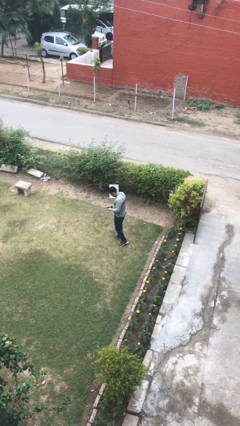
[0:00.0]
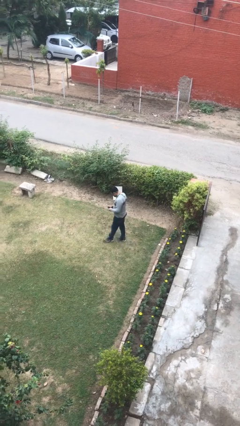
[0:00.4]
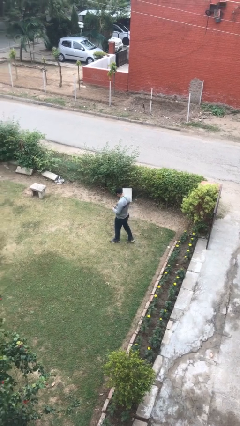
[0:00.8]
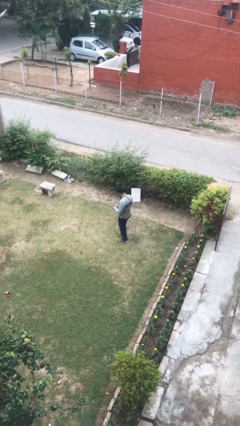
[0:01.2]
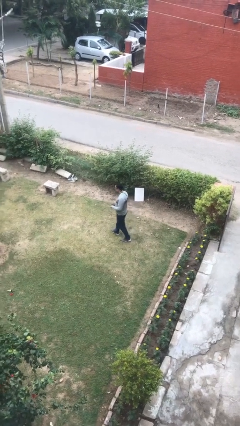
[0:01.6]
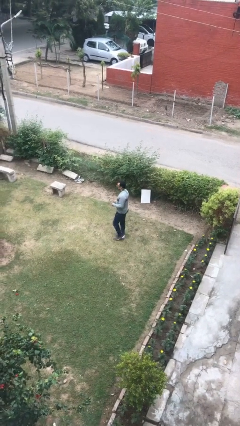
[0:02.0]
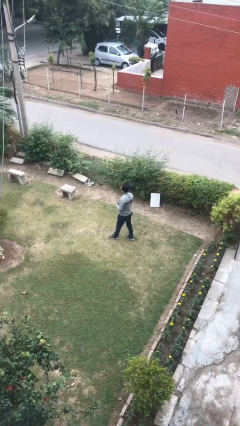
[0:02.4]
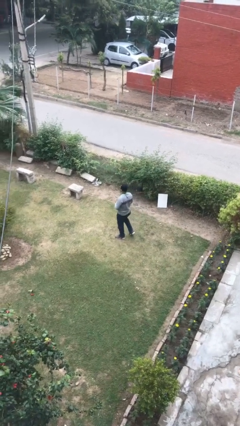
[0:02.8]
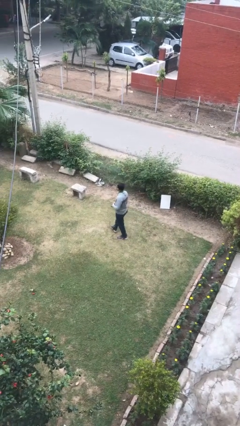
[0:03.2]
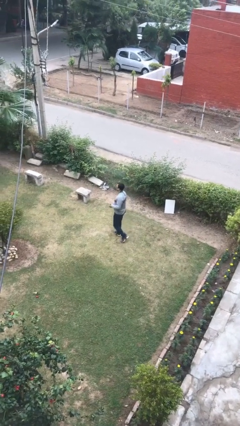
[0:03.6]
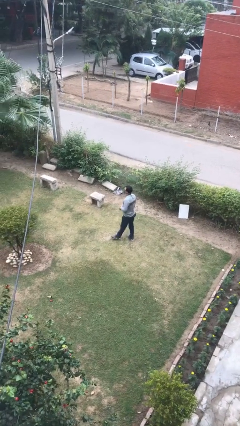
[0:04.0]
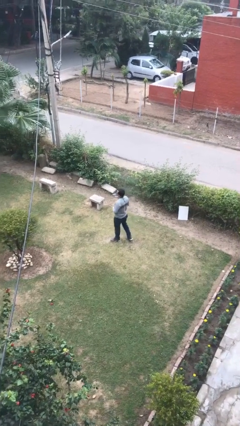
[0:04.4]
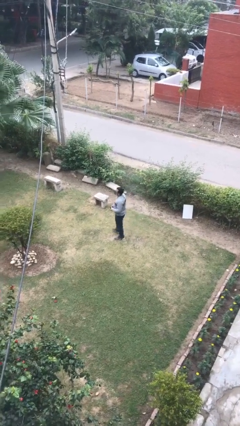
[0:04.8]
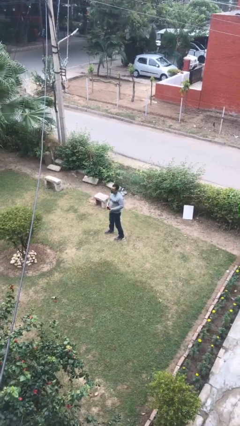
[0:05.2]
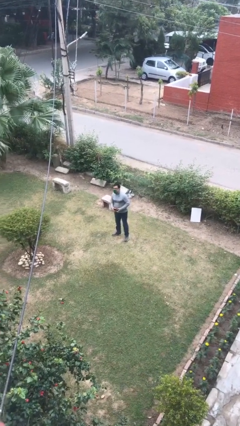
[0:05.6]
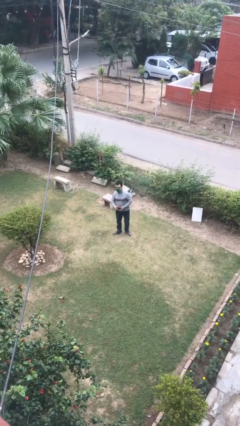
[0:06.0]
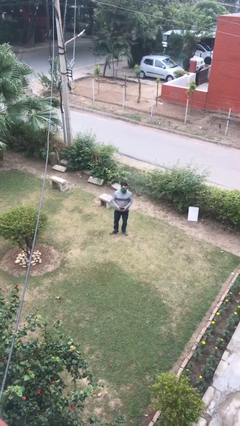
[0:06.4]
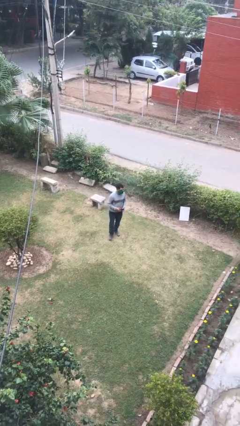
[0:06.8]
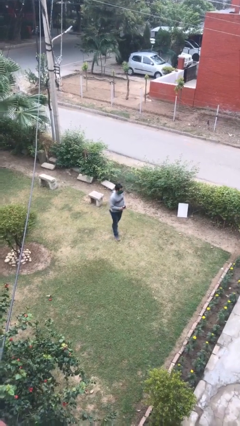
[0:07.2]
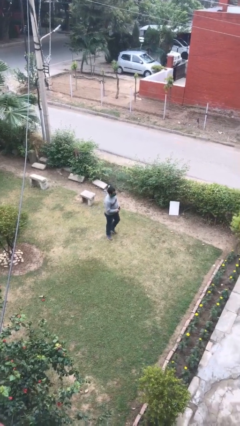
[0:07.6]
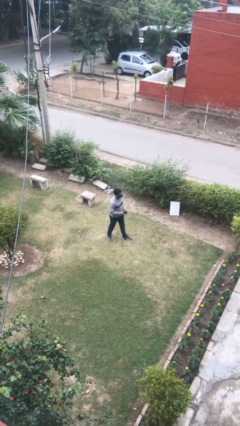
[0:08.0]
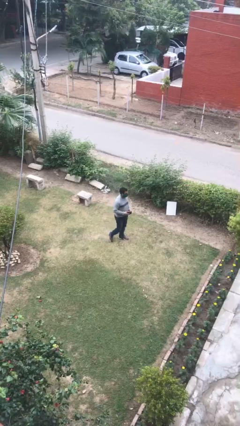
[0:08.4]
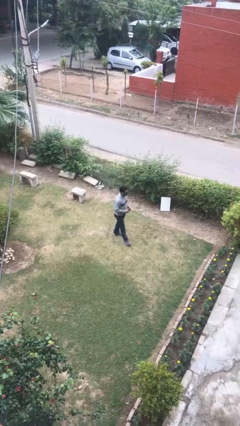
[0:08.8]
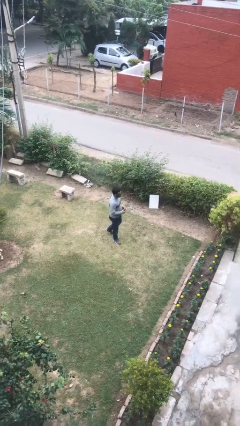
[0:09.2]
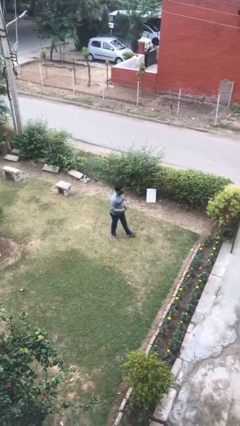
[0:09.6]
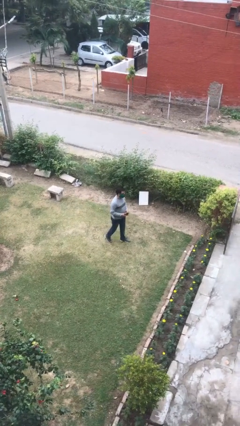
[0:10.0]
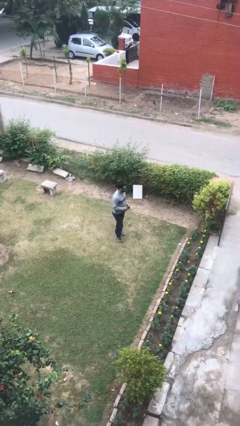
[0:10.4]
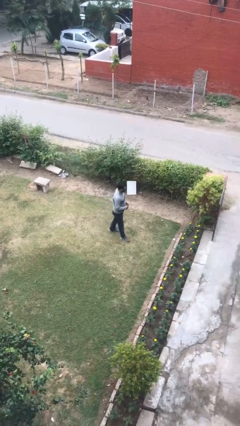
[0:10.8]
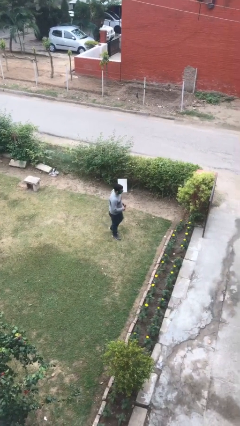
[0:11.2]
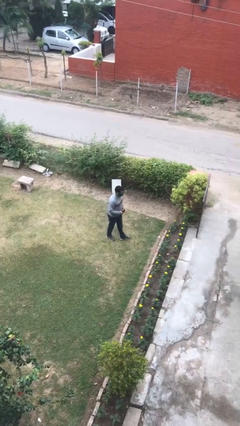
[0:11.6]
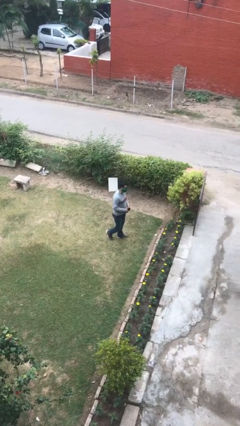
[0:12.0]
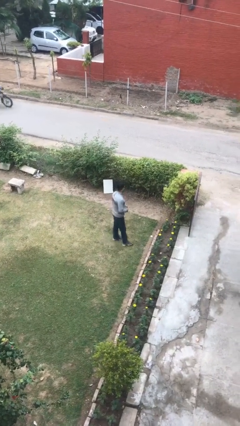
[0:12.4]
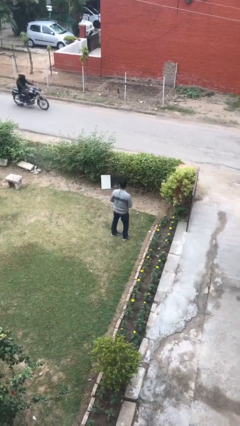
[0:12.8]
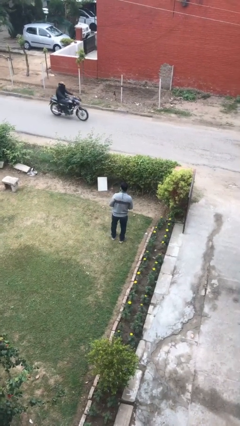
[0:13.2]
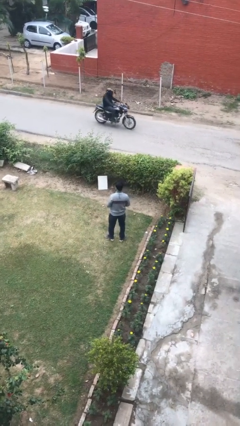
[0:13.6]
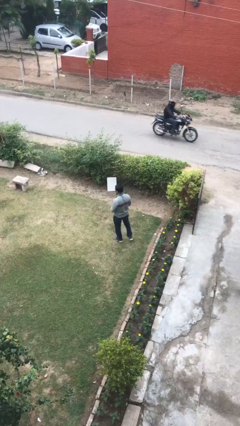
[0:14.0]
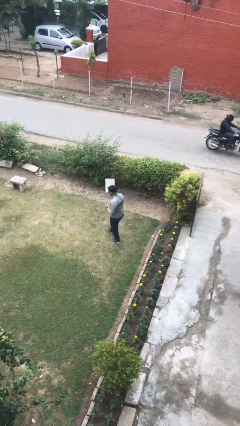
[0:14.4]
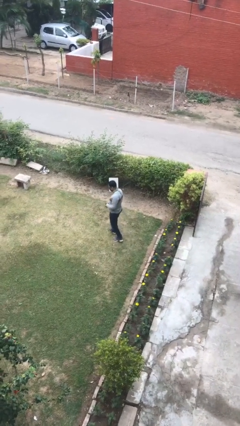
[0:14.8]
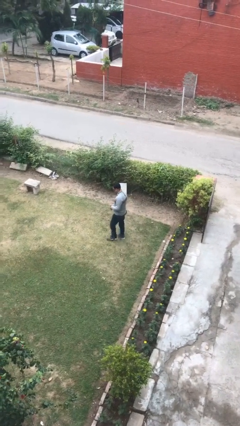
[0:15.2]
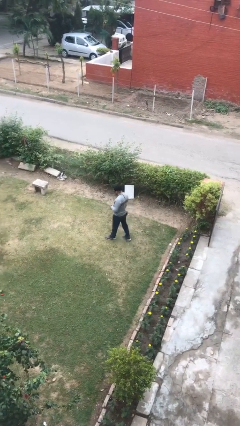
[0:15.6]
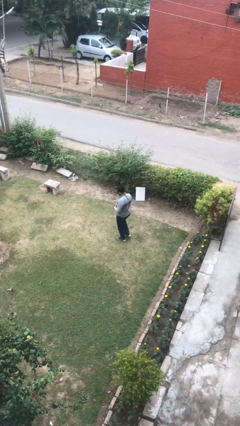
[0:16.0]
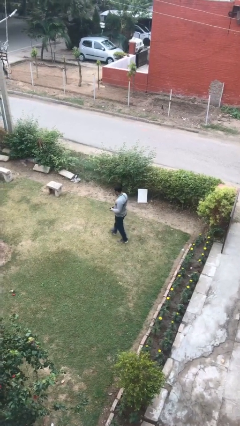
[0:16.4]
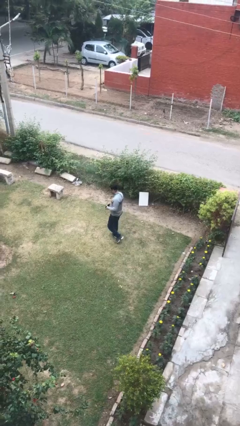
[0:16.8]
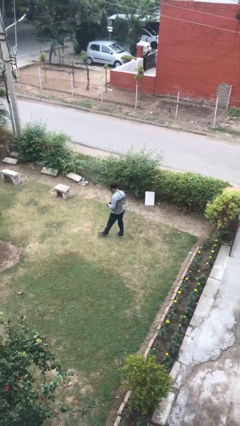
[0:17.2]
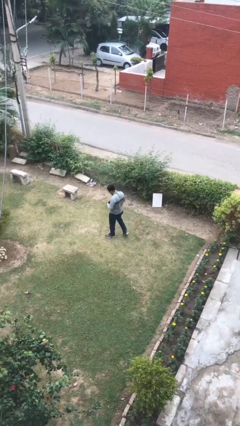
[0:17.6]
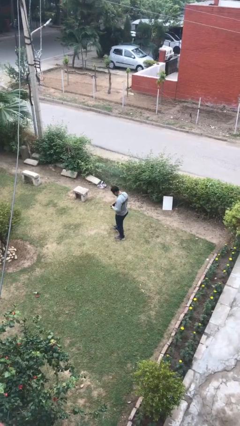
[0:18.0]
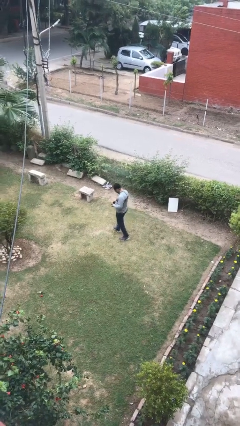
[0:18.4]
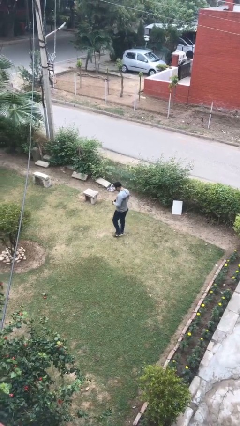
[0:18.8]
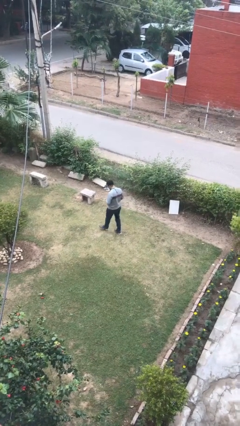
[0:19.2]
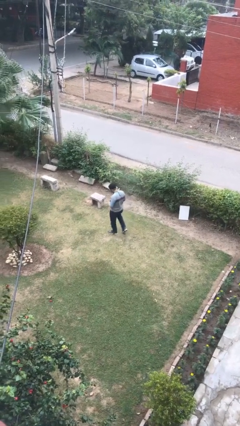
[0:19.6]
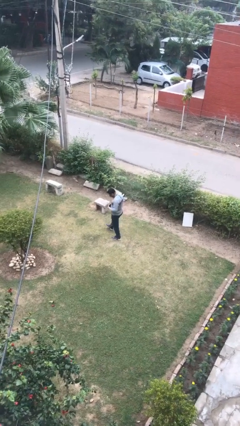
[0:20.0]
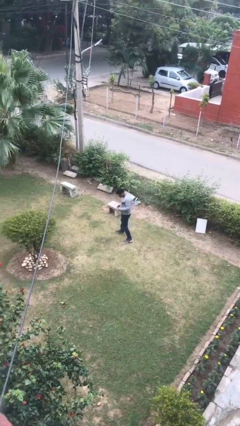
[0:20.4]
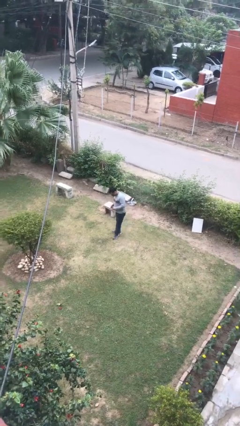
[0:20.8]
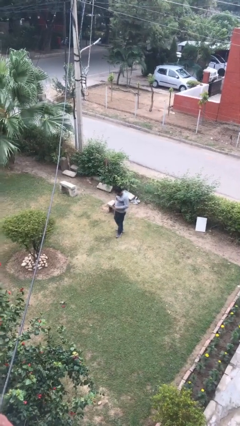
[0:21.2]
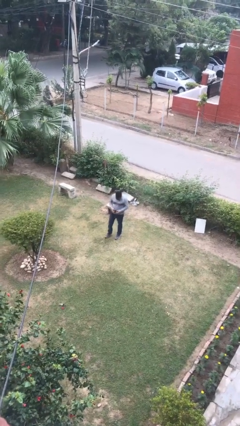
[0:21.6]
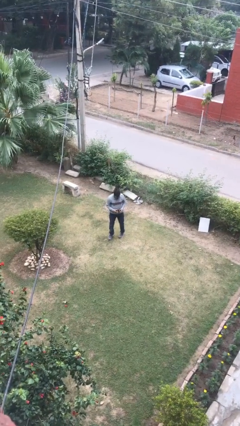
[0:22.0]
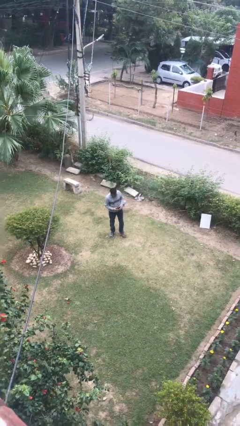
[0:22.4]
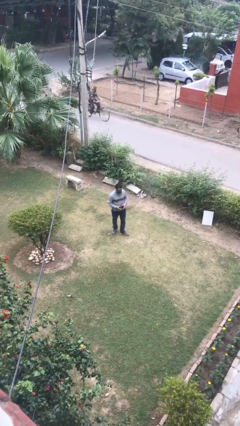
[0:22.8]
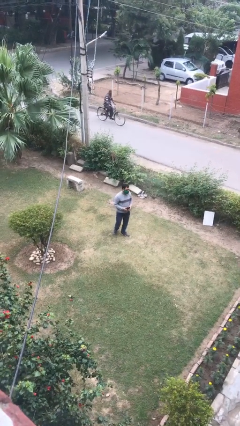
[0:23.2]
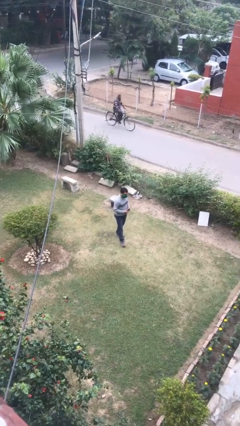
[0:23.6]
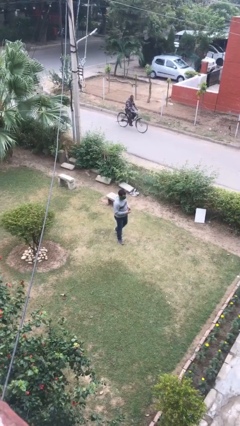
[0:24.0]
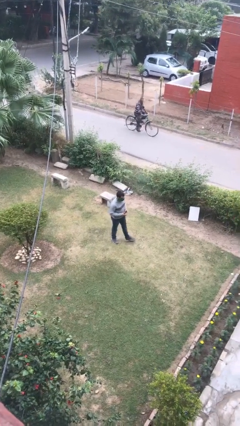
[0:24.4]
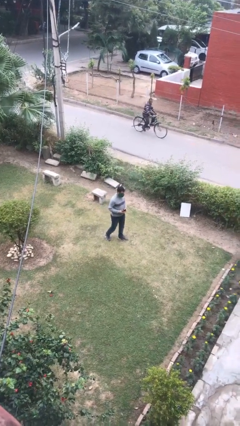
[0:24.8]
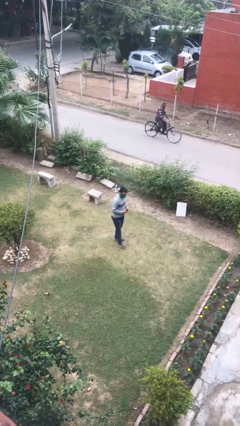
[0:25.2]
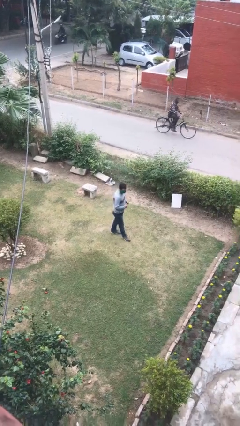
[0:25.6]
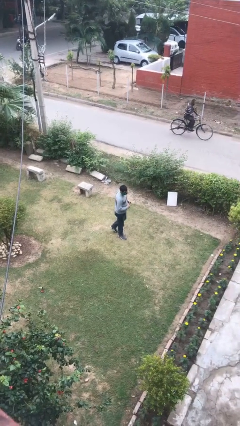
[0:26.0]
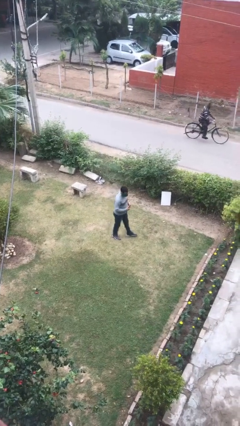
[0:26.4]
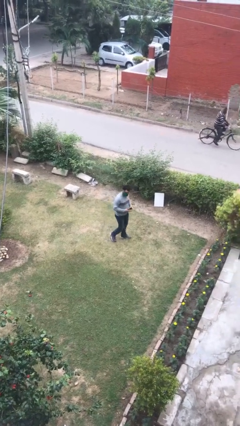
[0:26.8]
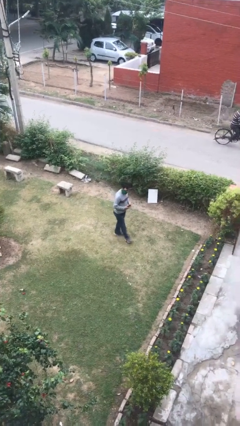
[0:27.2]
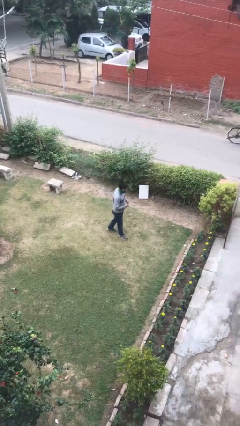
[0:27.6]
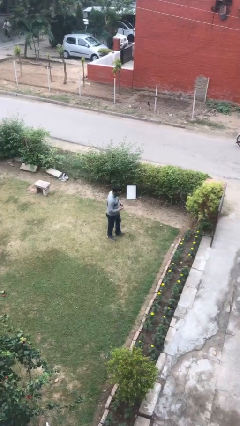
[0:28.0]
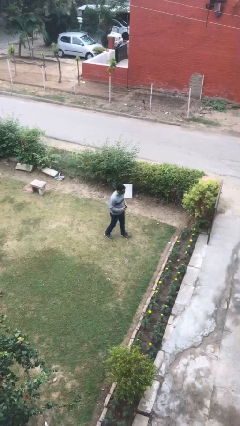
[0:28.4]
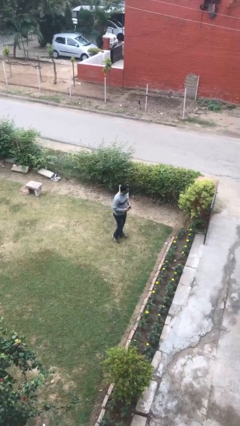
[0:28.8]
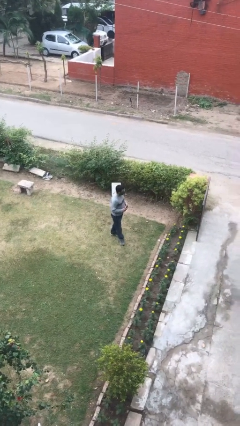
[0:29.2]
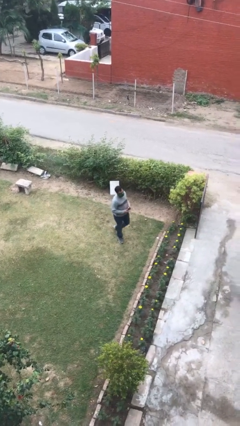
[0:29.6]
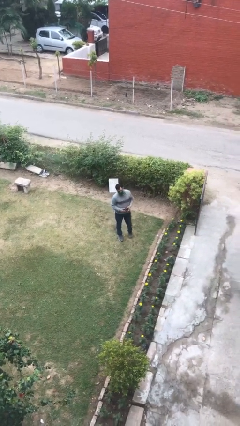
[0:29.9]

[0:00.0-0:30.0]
person walks

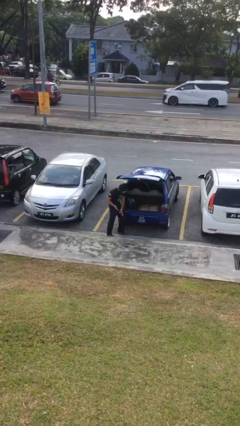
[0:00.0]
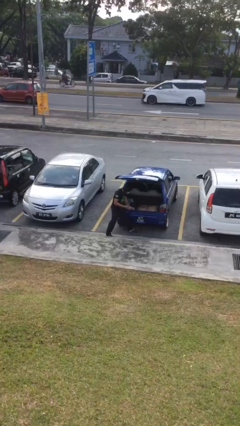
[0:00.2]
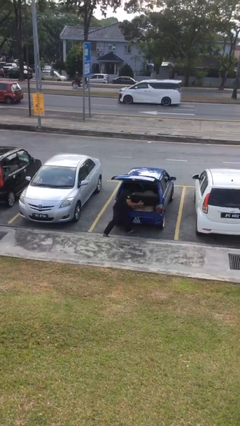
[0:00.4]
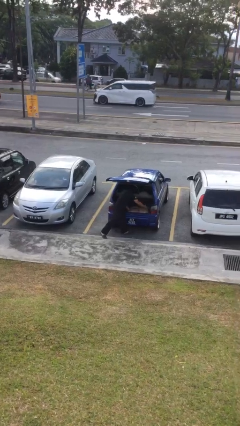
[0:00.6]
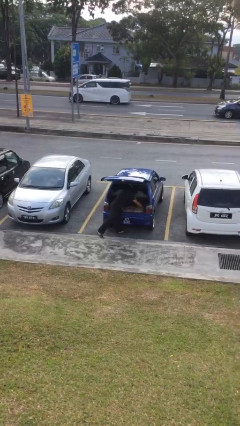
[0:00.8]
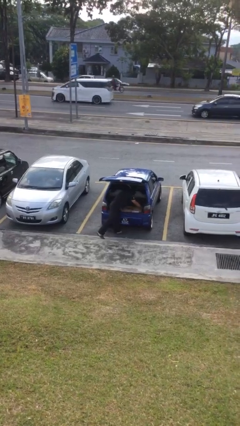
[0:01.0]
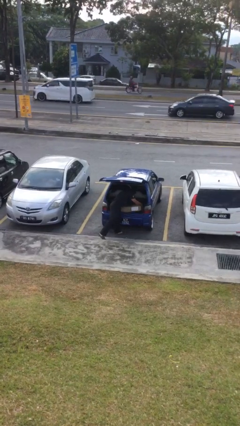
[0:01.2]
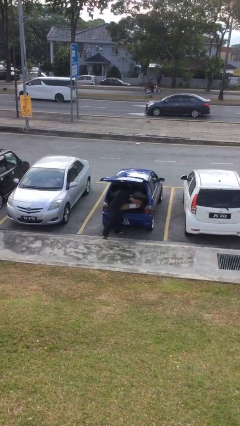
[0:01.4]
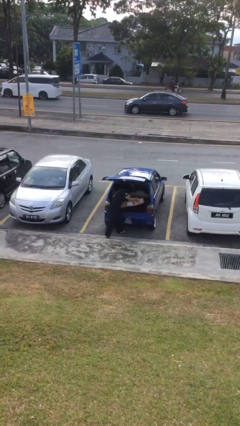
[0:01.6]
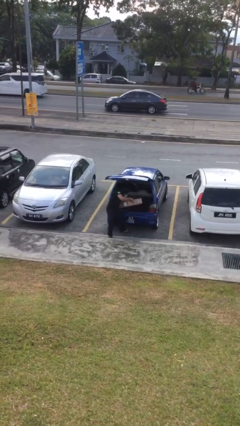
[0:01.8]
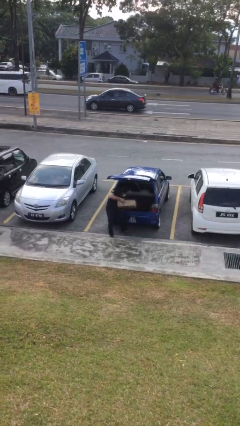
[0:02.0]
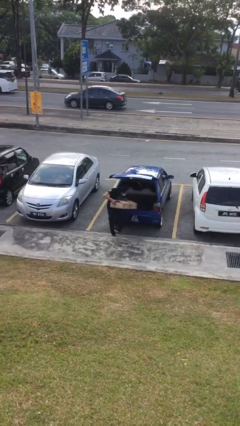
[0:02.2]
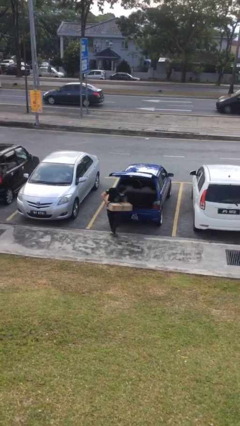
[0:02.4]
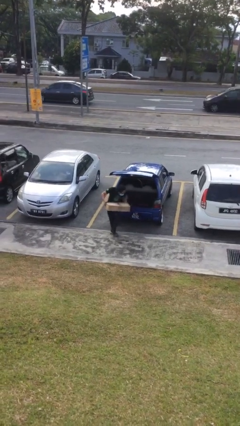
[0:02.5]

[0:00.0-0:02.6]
person unloads car

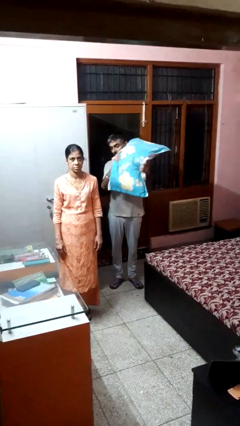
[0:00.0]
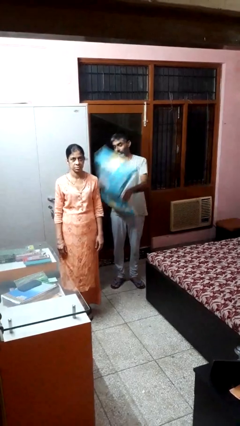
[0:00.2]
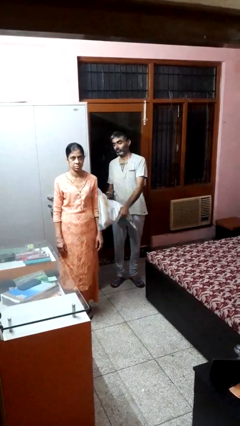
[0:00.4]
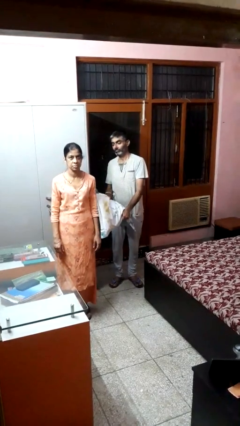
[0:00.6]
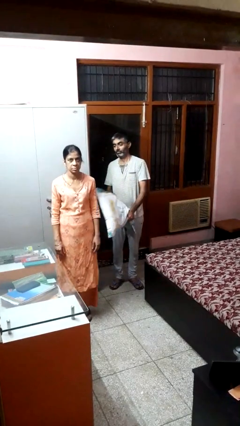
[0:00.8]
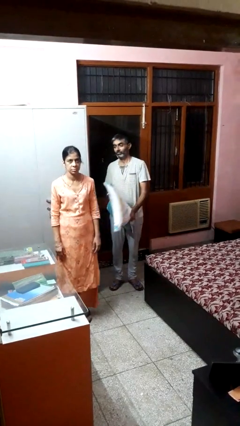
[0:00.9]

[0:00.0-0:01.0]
person hits person with pillow
